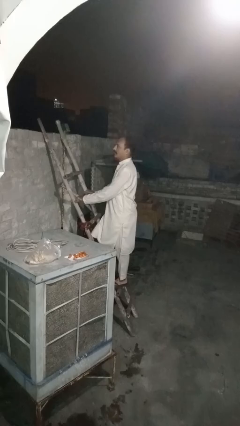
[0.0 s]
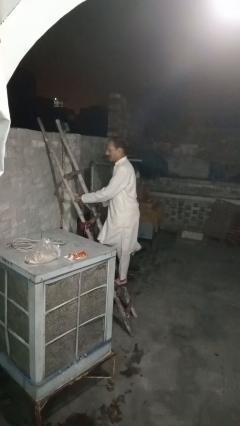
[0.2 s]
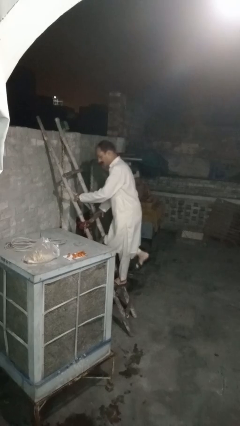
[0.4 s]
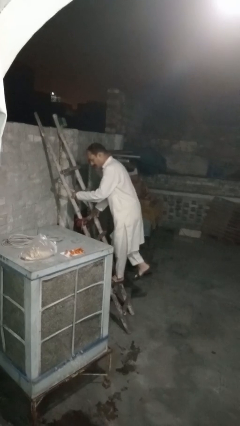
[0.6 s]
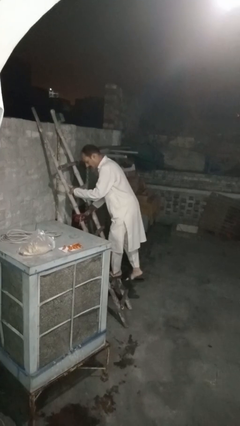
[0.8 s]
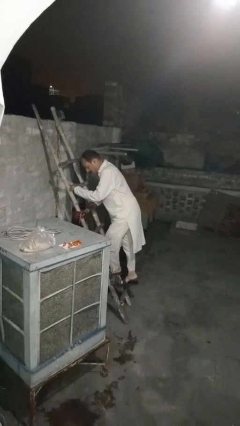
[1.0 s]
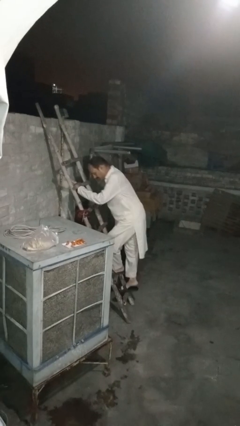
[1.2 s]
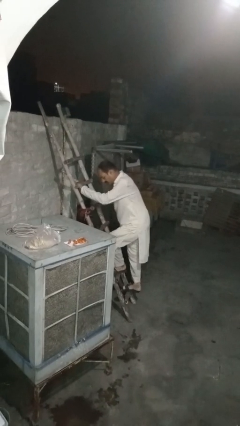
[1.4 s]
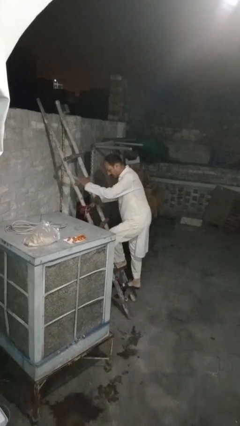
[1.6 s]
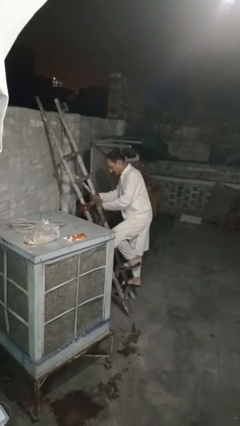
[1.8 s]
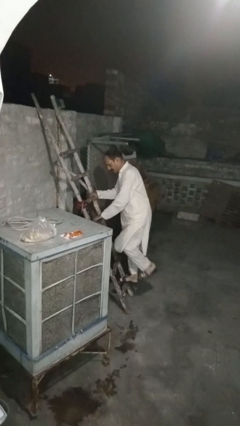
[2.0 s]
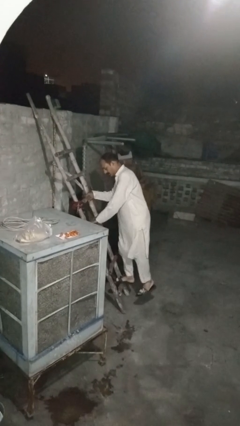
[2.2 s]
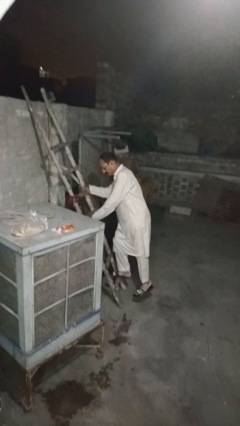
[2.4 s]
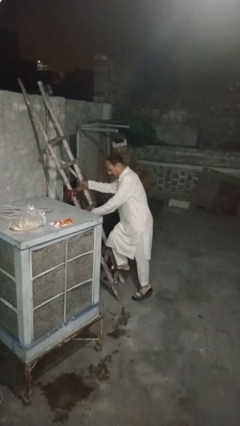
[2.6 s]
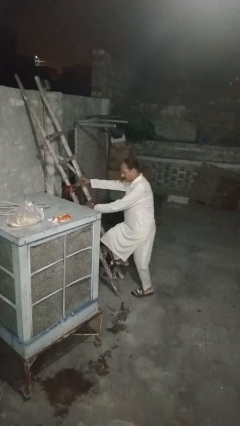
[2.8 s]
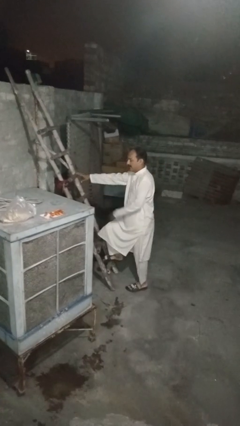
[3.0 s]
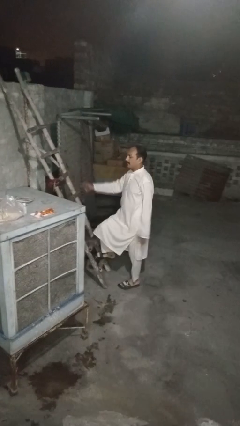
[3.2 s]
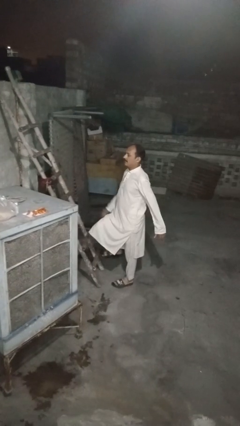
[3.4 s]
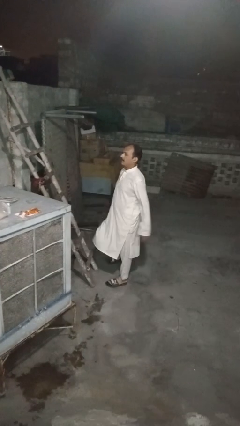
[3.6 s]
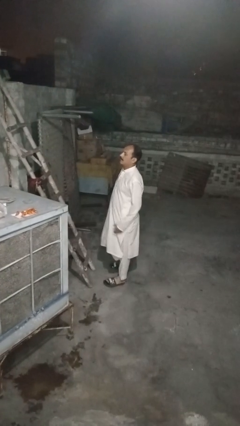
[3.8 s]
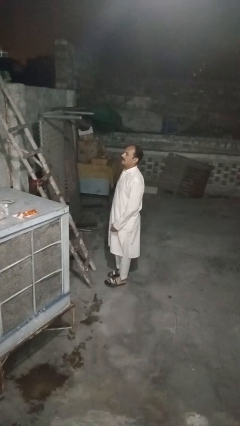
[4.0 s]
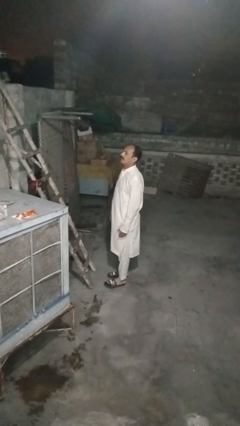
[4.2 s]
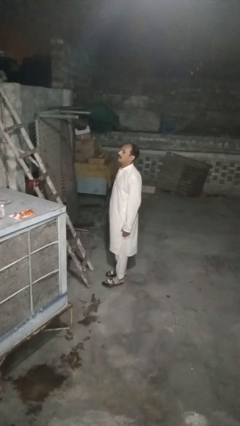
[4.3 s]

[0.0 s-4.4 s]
person climbs down ladder

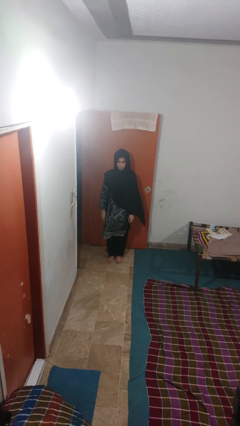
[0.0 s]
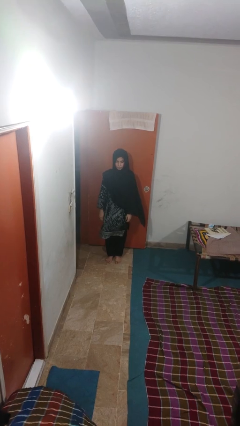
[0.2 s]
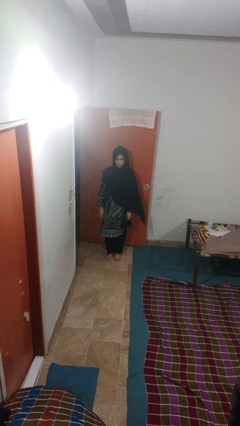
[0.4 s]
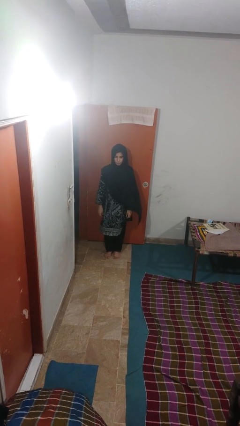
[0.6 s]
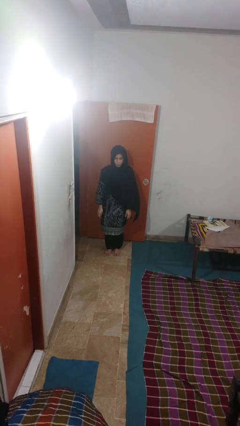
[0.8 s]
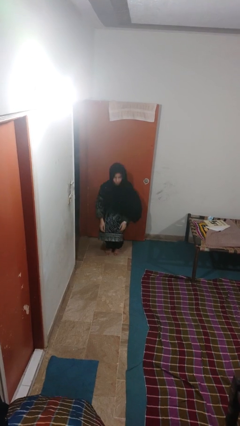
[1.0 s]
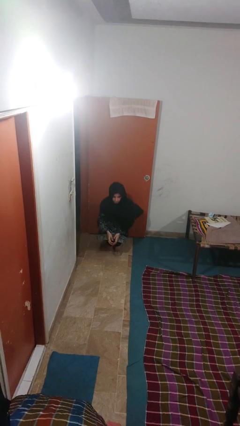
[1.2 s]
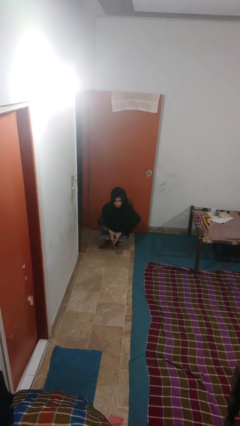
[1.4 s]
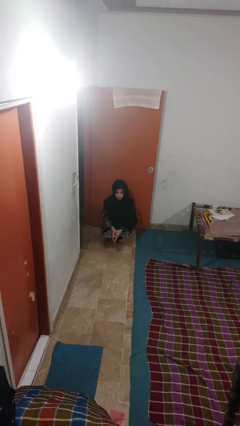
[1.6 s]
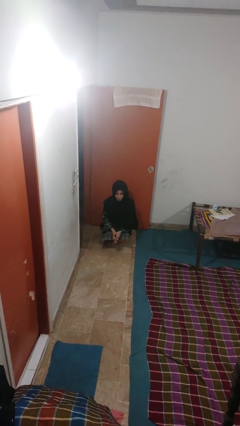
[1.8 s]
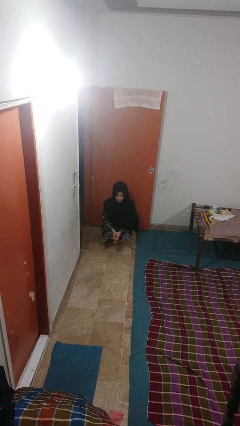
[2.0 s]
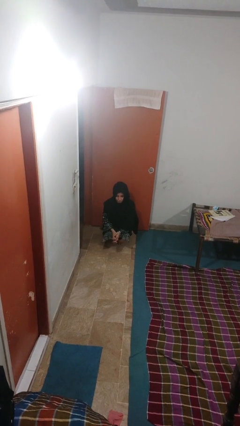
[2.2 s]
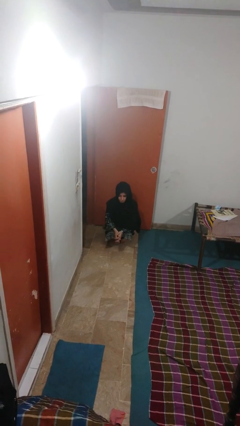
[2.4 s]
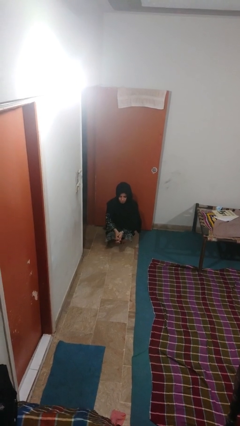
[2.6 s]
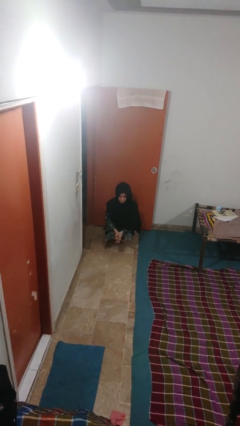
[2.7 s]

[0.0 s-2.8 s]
person squats

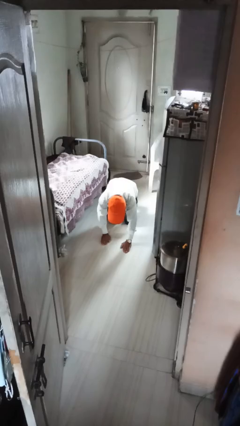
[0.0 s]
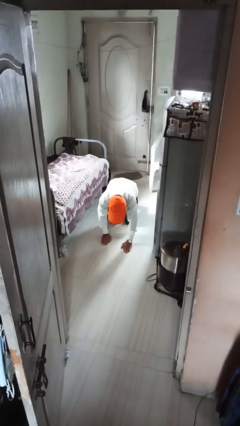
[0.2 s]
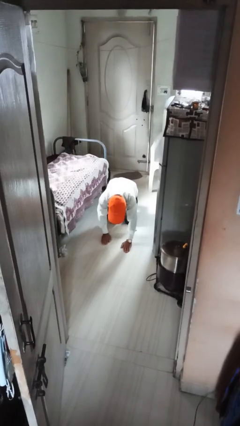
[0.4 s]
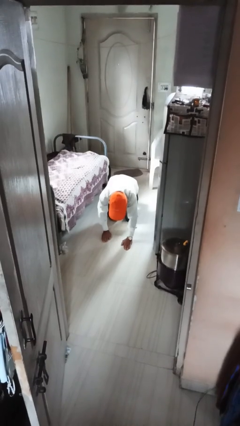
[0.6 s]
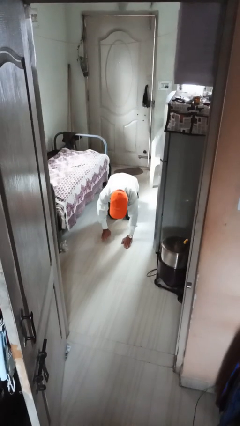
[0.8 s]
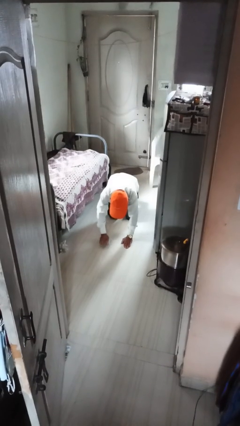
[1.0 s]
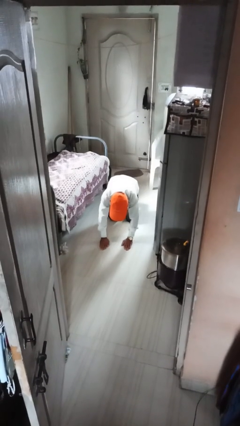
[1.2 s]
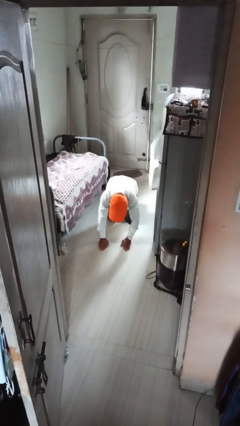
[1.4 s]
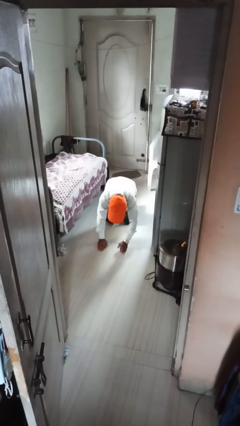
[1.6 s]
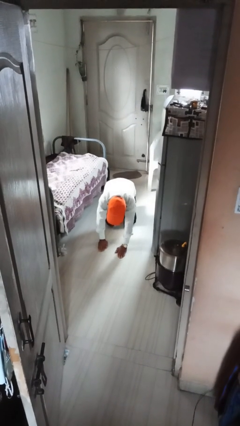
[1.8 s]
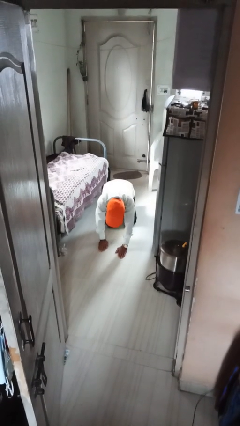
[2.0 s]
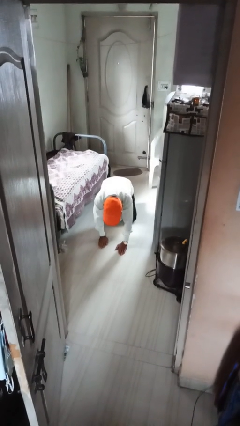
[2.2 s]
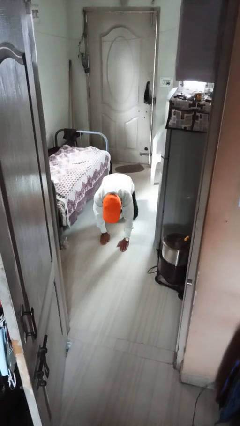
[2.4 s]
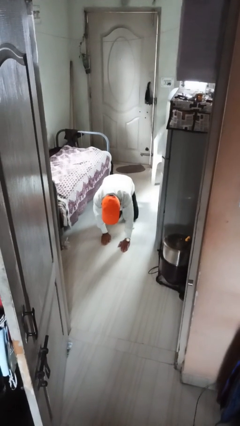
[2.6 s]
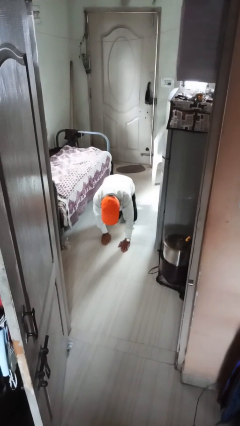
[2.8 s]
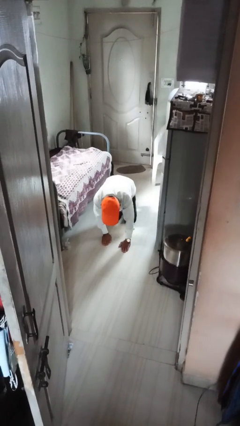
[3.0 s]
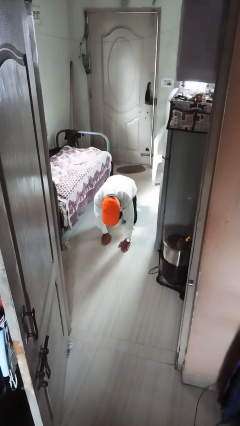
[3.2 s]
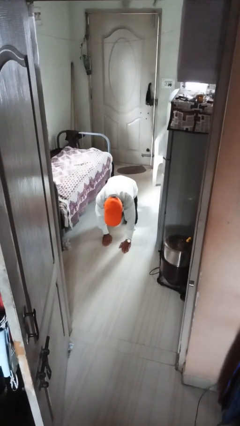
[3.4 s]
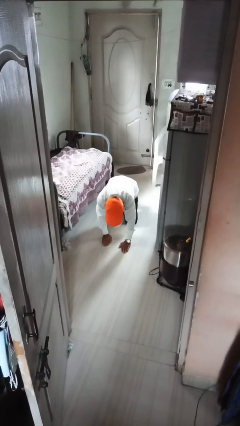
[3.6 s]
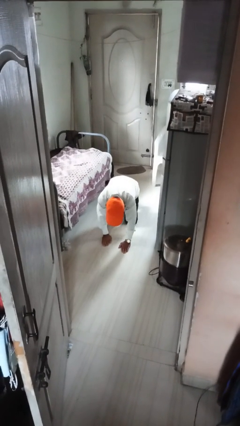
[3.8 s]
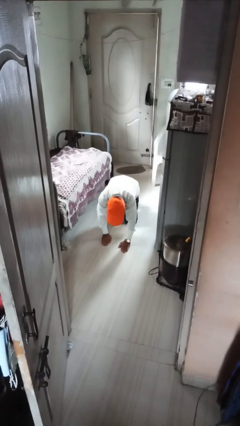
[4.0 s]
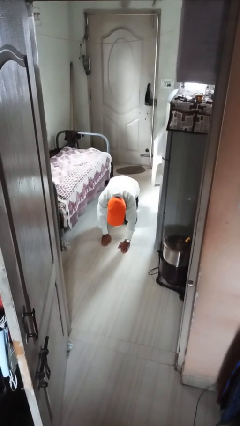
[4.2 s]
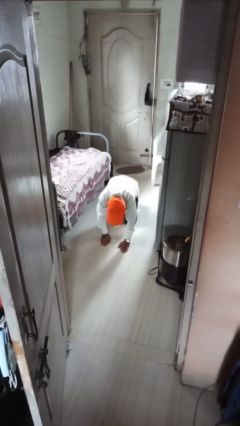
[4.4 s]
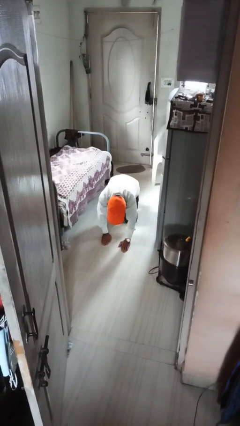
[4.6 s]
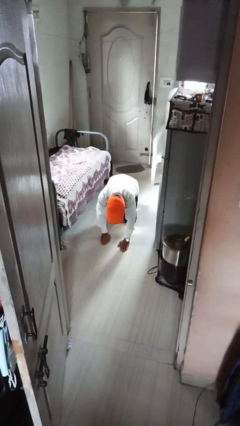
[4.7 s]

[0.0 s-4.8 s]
person crawls

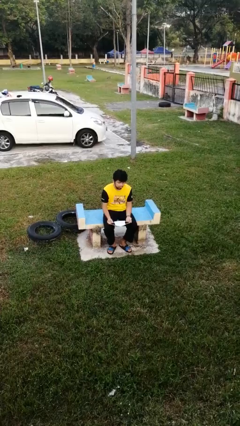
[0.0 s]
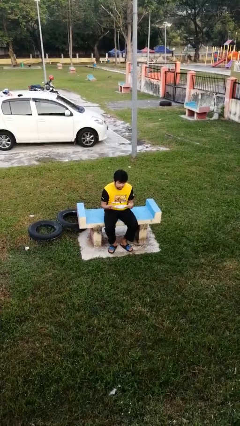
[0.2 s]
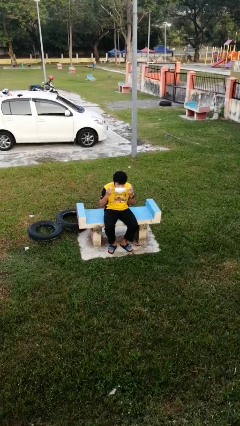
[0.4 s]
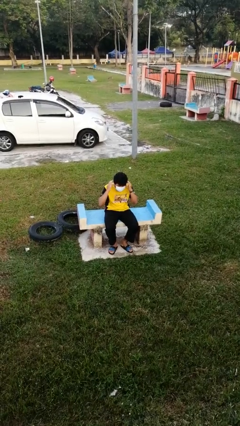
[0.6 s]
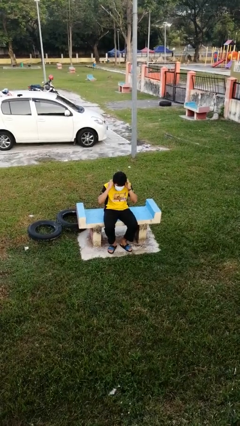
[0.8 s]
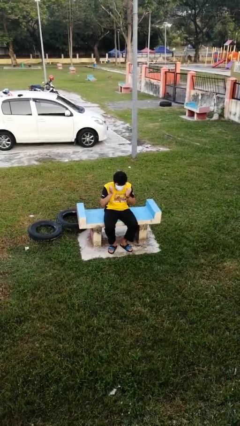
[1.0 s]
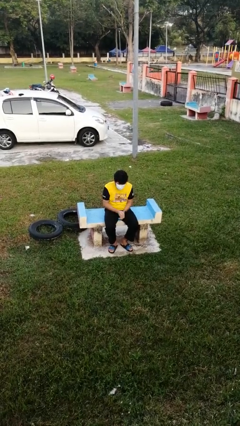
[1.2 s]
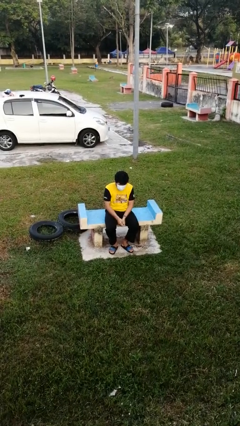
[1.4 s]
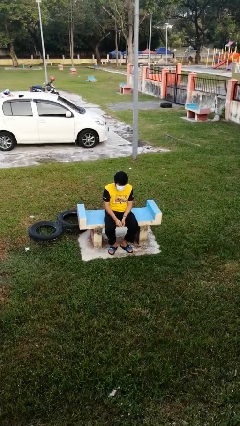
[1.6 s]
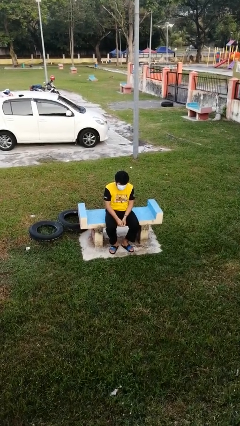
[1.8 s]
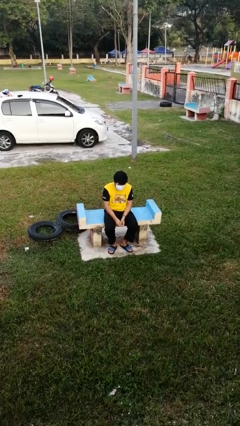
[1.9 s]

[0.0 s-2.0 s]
person puts on facemask

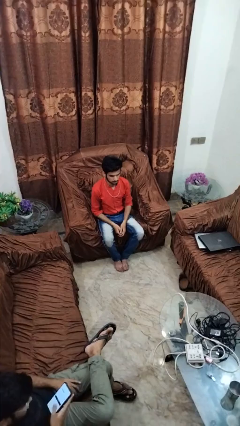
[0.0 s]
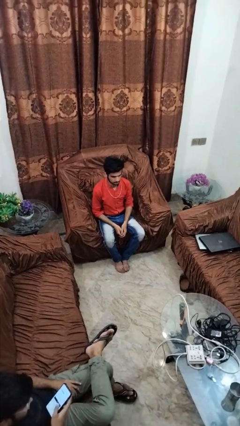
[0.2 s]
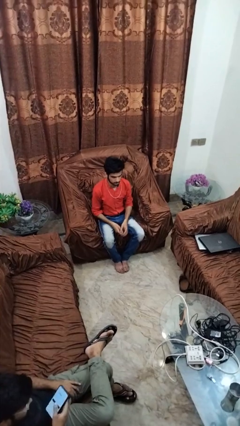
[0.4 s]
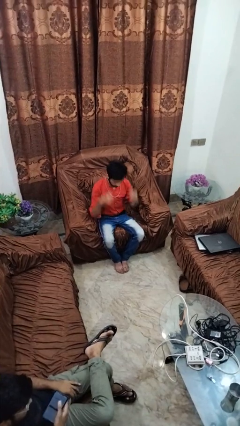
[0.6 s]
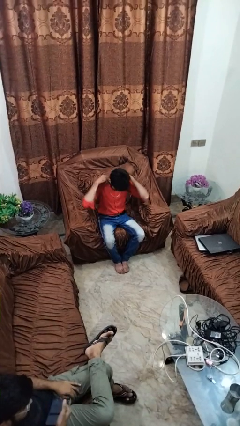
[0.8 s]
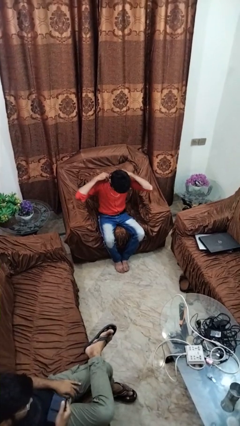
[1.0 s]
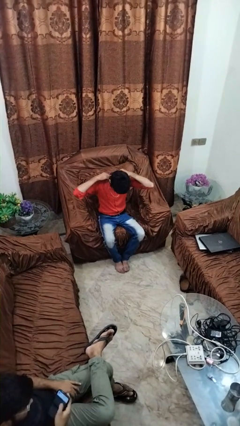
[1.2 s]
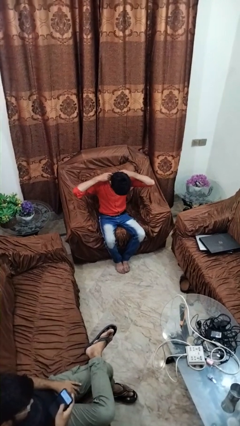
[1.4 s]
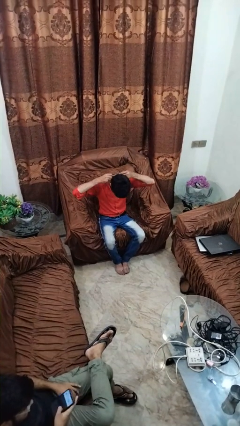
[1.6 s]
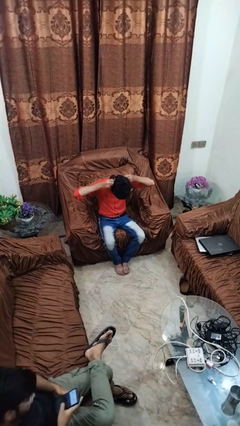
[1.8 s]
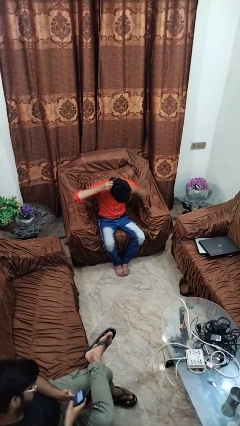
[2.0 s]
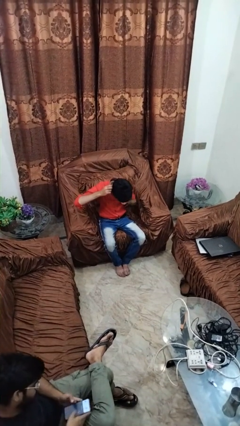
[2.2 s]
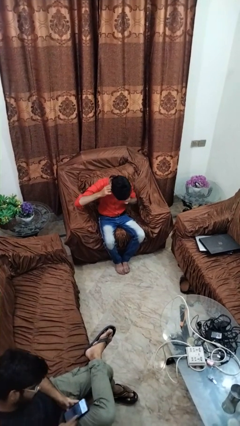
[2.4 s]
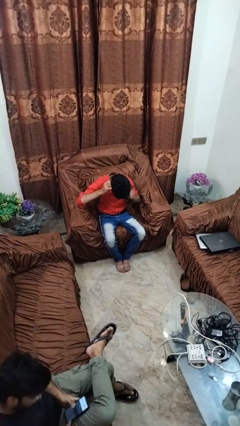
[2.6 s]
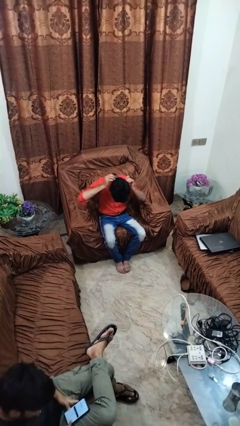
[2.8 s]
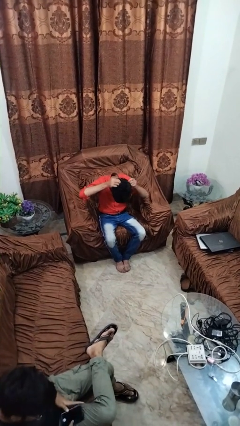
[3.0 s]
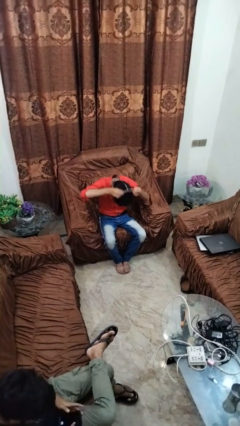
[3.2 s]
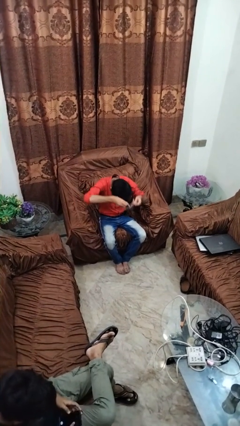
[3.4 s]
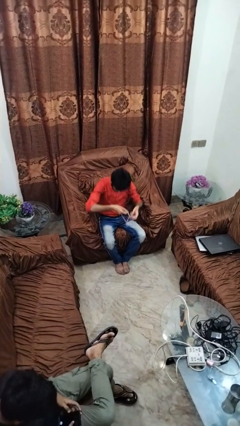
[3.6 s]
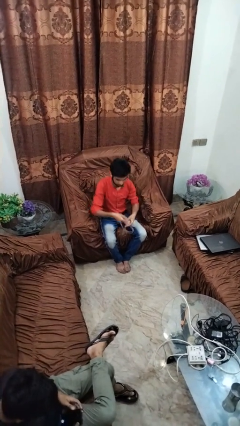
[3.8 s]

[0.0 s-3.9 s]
person takes off necklace
